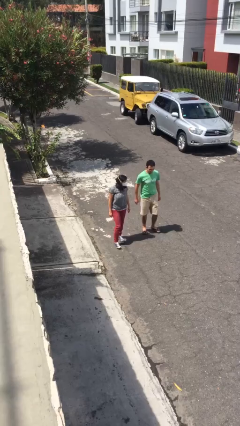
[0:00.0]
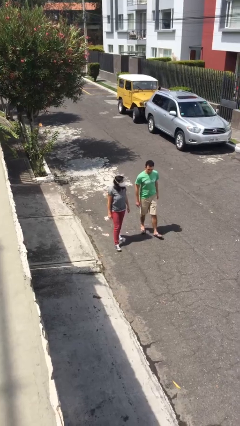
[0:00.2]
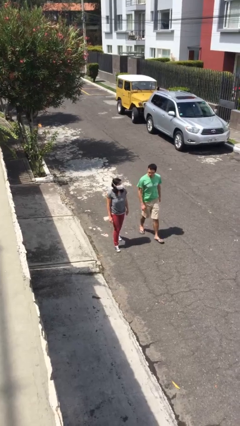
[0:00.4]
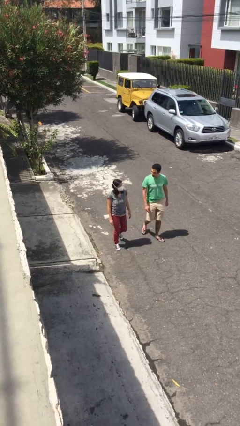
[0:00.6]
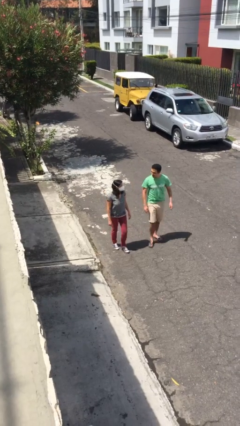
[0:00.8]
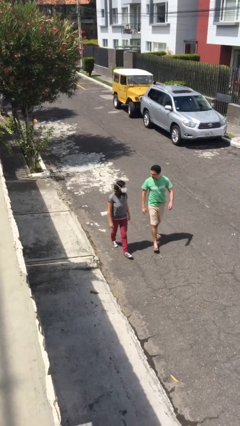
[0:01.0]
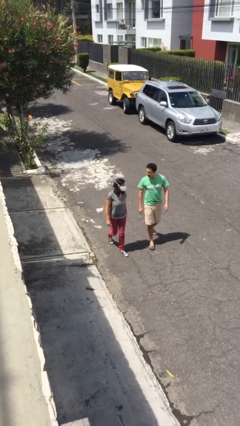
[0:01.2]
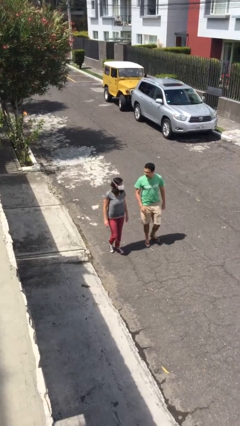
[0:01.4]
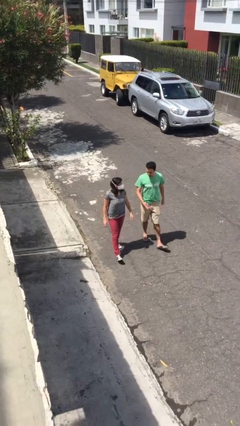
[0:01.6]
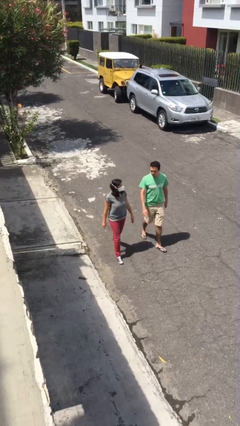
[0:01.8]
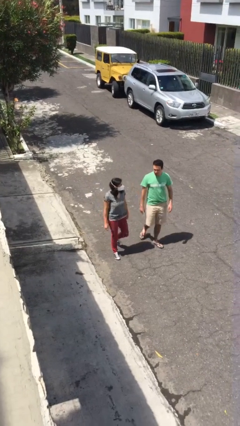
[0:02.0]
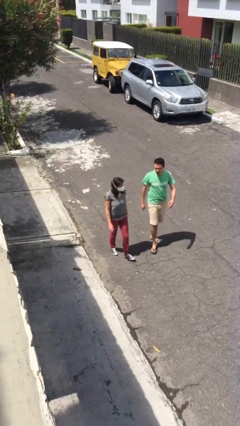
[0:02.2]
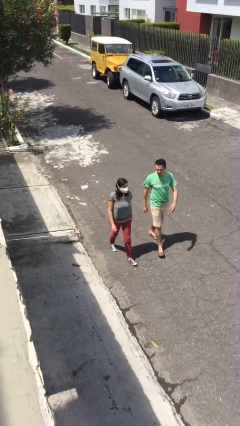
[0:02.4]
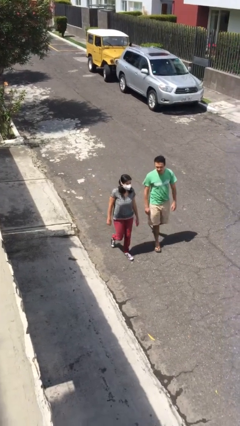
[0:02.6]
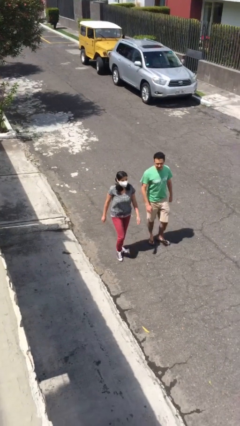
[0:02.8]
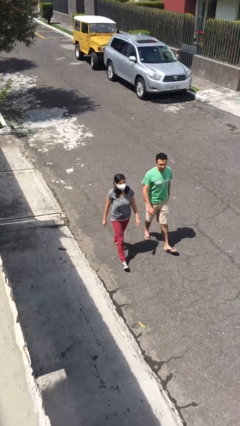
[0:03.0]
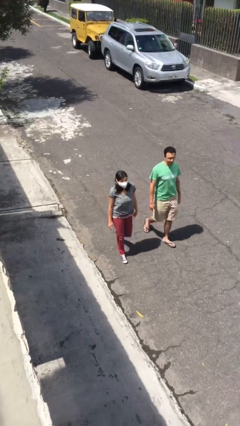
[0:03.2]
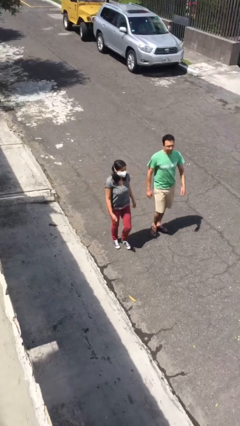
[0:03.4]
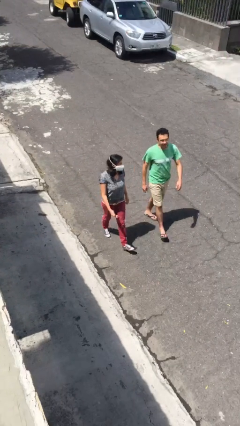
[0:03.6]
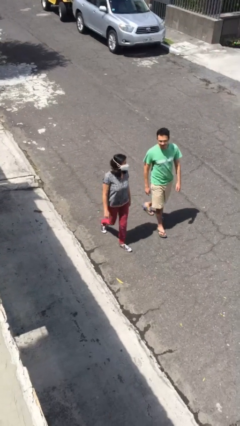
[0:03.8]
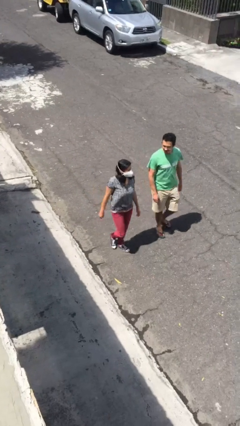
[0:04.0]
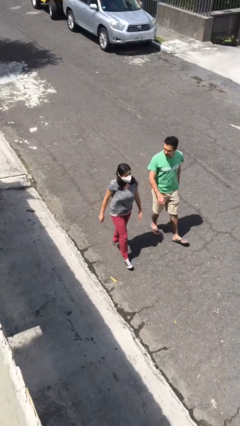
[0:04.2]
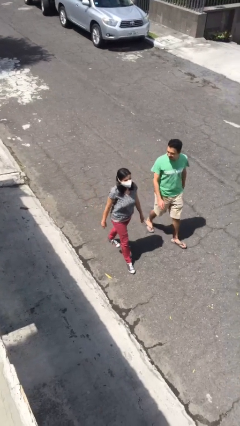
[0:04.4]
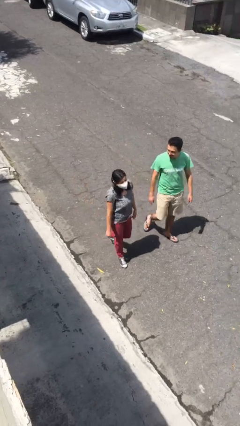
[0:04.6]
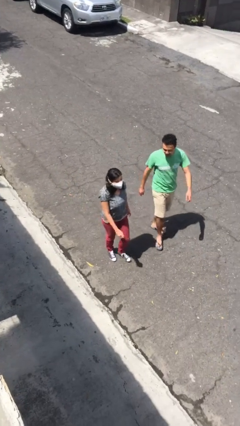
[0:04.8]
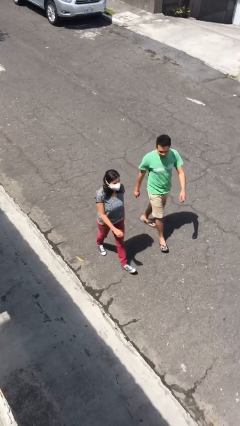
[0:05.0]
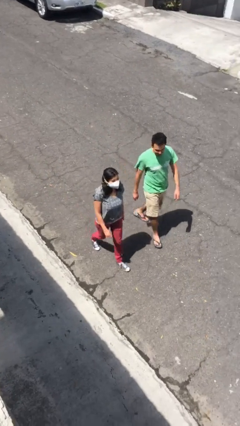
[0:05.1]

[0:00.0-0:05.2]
person talks to person

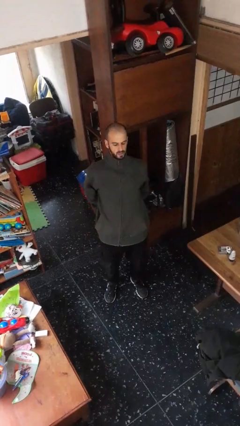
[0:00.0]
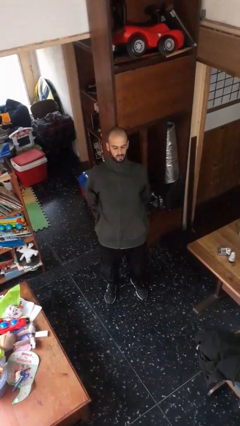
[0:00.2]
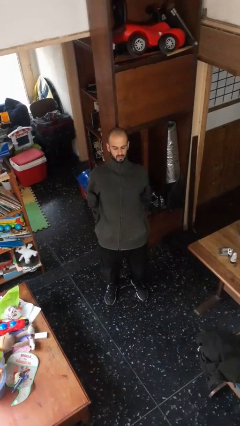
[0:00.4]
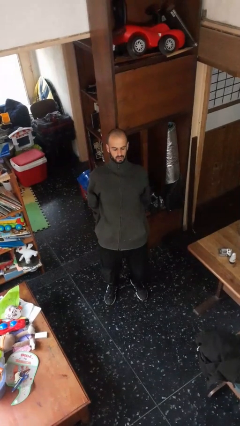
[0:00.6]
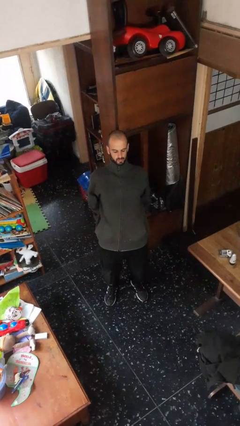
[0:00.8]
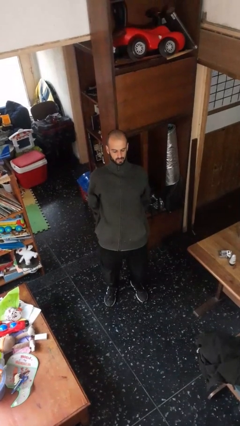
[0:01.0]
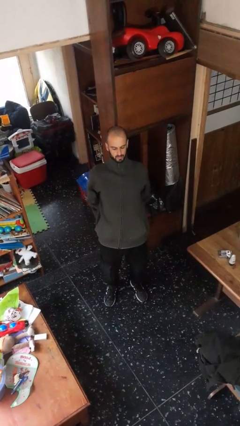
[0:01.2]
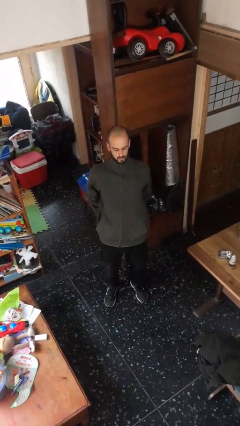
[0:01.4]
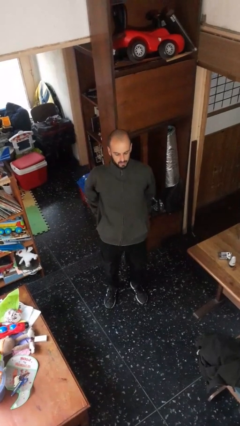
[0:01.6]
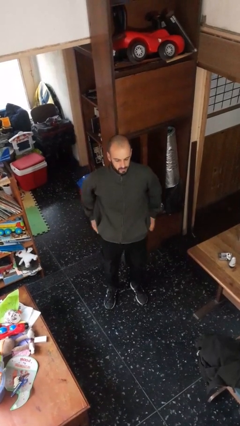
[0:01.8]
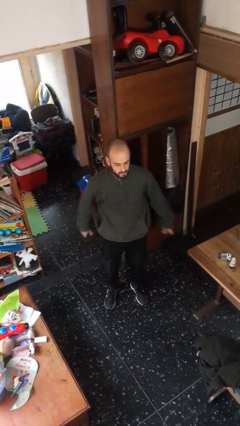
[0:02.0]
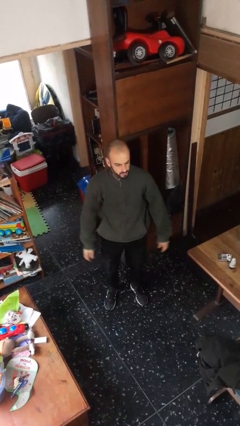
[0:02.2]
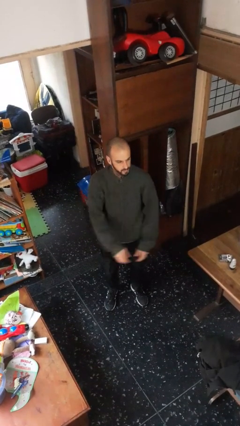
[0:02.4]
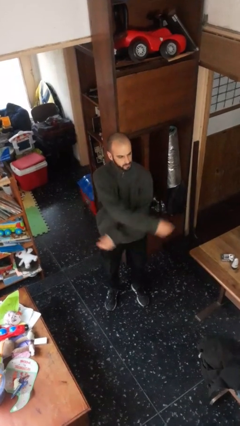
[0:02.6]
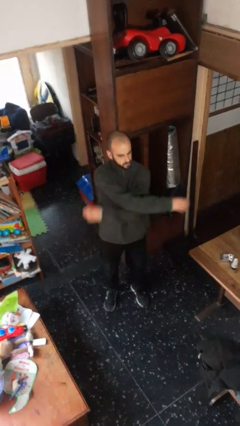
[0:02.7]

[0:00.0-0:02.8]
person stretches back

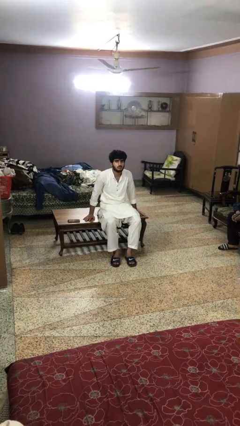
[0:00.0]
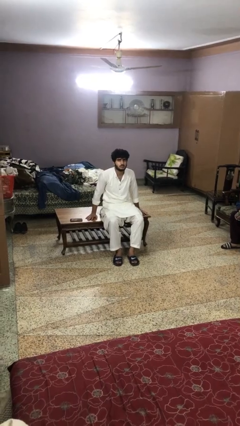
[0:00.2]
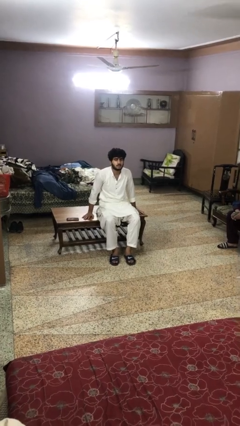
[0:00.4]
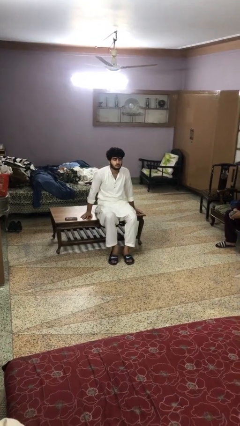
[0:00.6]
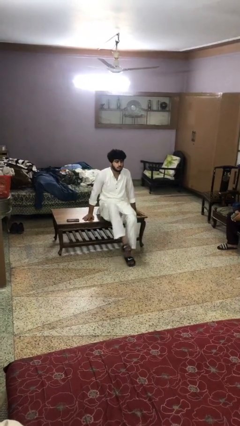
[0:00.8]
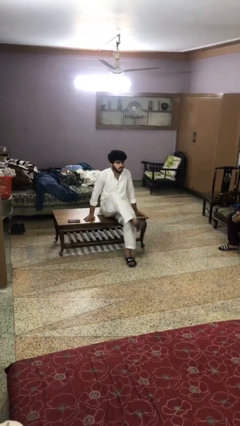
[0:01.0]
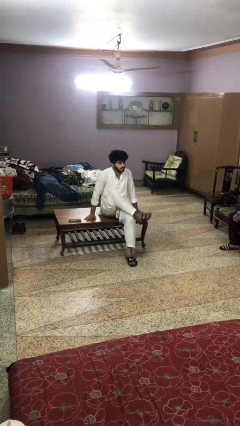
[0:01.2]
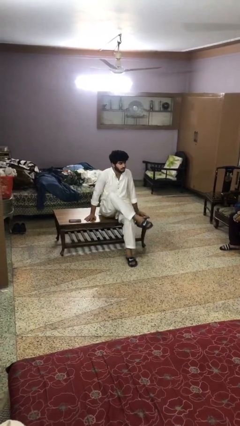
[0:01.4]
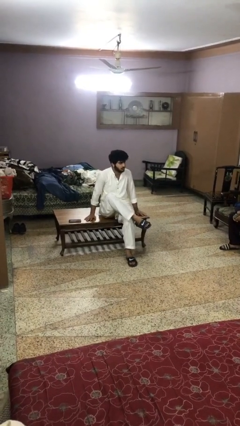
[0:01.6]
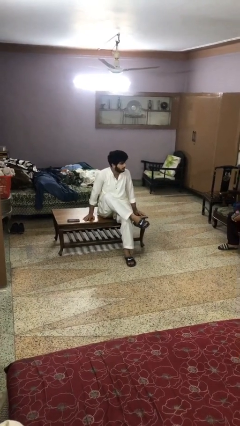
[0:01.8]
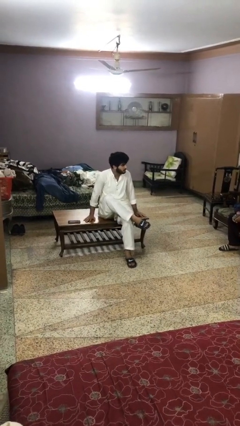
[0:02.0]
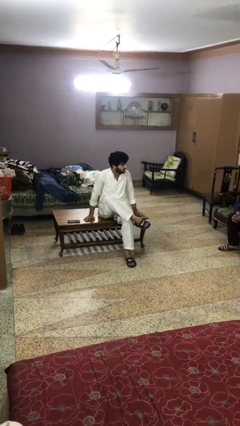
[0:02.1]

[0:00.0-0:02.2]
person crosses legs

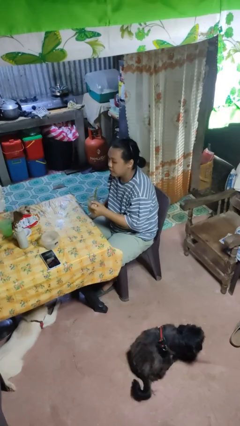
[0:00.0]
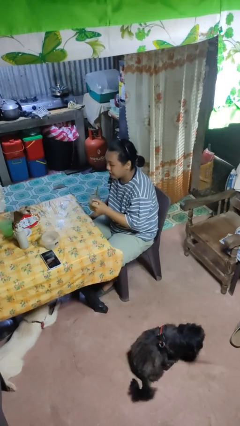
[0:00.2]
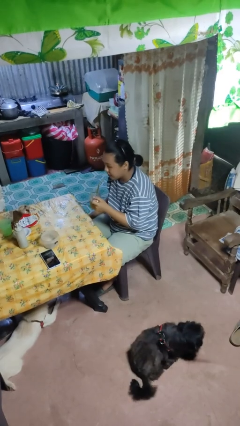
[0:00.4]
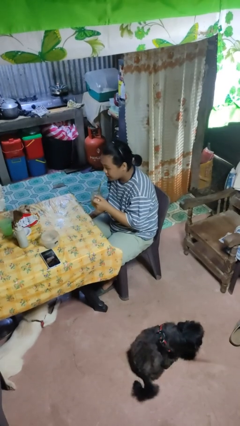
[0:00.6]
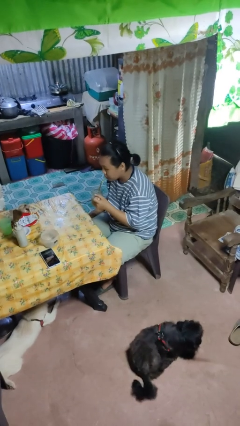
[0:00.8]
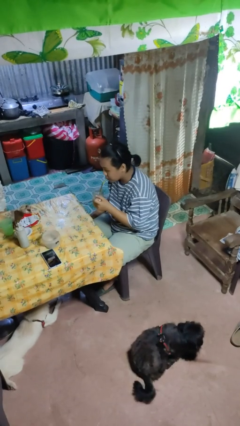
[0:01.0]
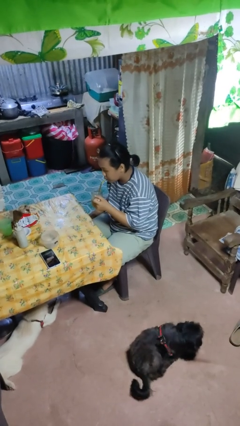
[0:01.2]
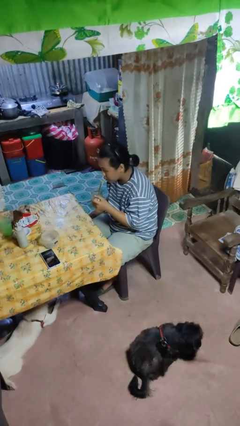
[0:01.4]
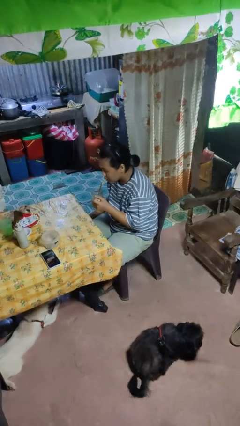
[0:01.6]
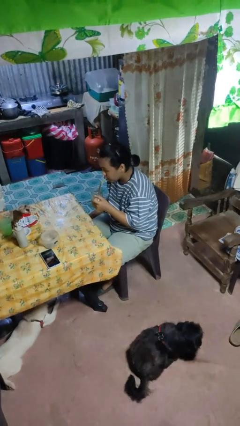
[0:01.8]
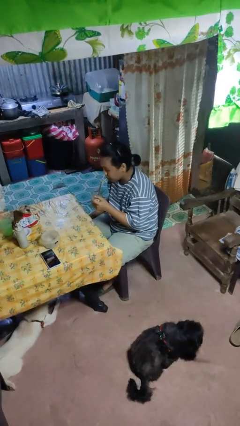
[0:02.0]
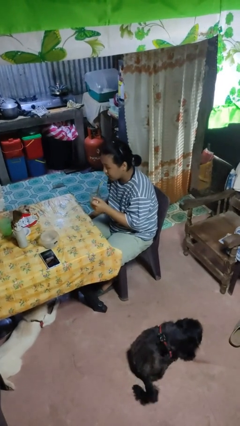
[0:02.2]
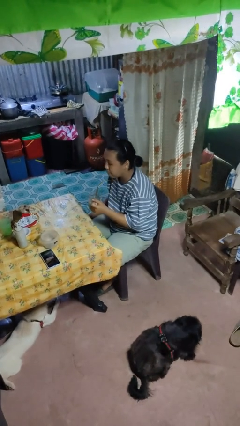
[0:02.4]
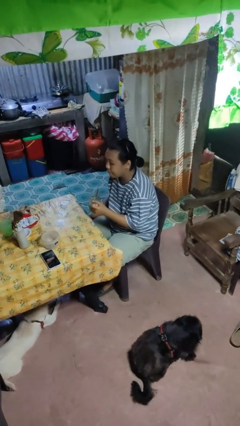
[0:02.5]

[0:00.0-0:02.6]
person drinks from straw

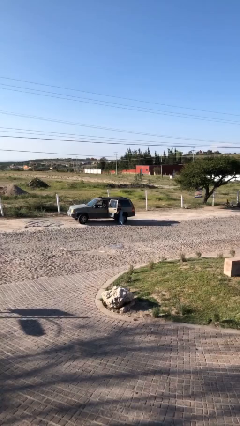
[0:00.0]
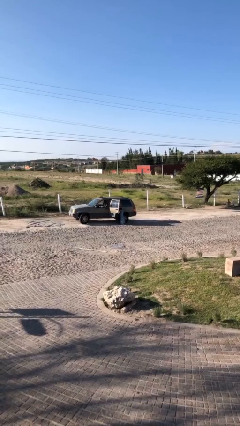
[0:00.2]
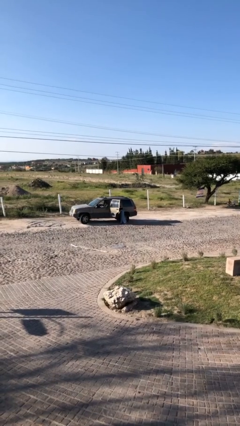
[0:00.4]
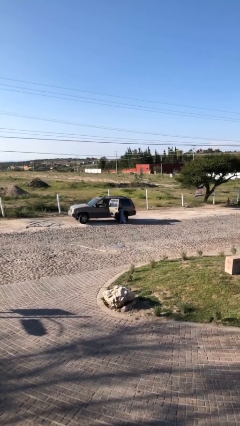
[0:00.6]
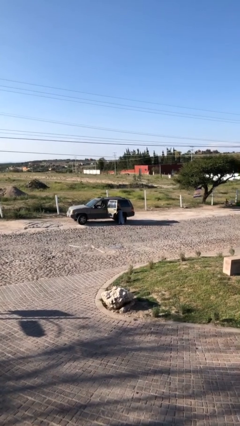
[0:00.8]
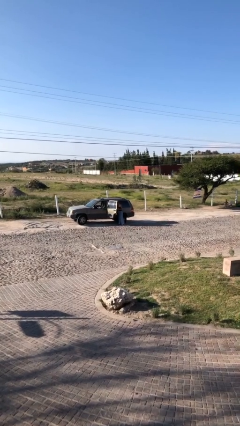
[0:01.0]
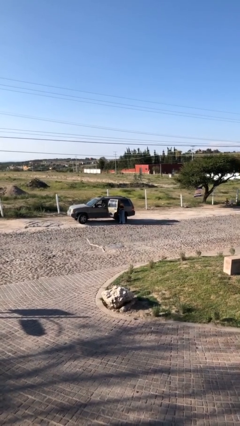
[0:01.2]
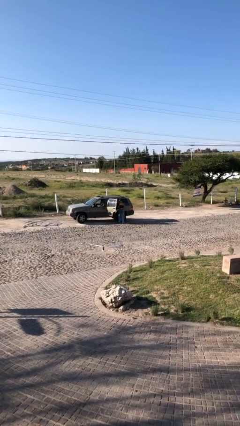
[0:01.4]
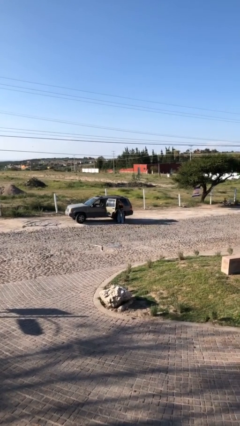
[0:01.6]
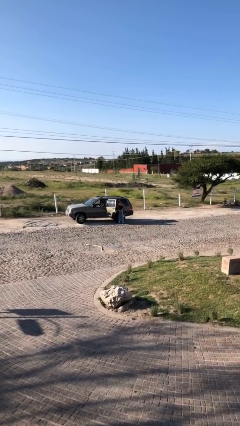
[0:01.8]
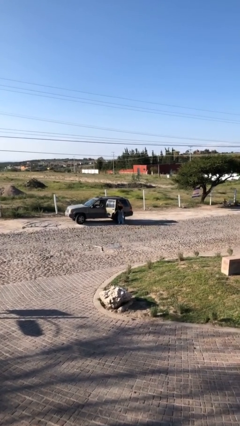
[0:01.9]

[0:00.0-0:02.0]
person unloads car

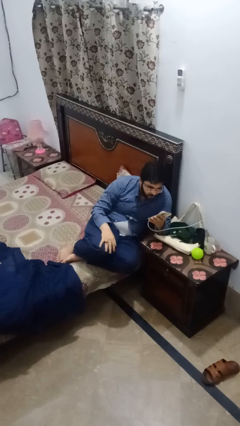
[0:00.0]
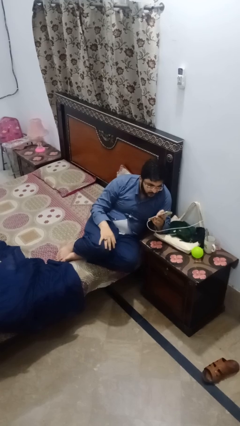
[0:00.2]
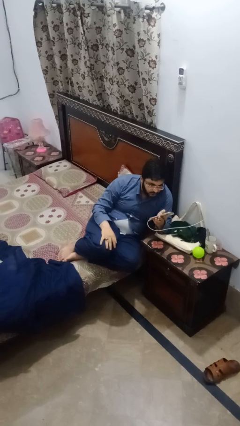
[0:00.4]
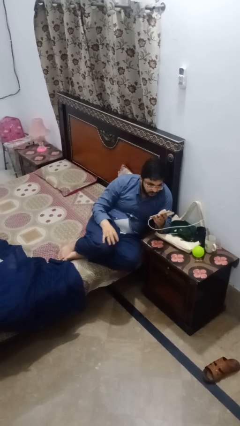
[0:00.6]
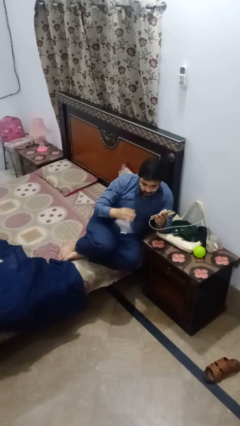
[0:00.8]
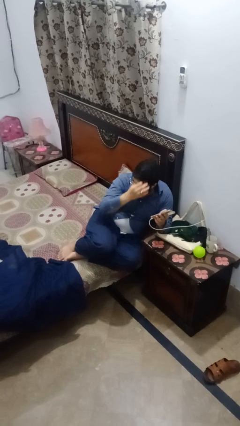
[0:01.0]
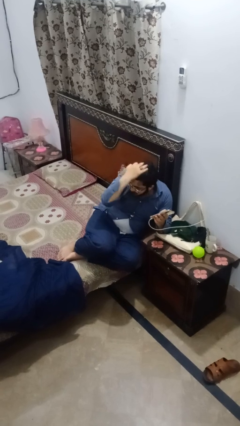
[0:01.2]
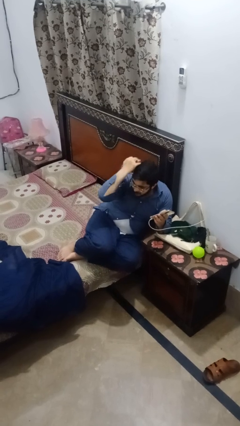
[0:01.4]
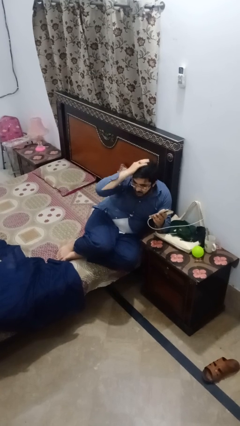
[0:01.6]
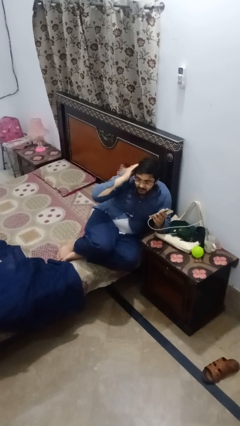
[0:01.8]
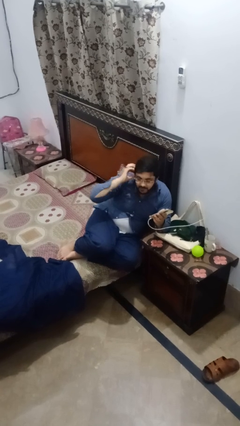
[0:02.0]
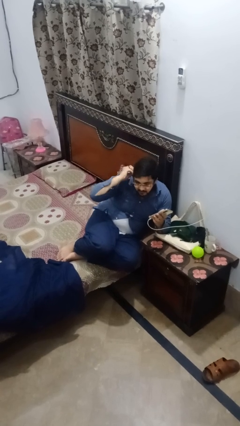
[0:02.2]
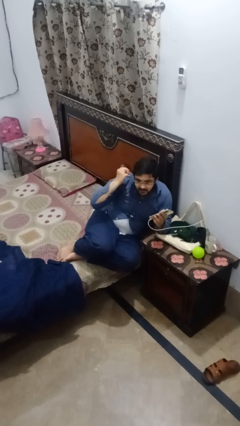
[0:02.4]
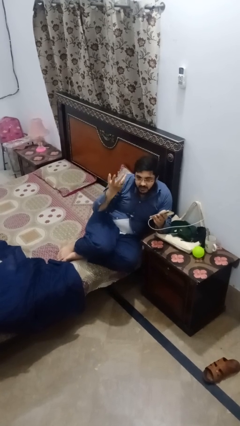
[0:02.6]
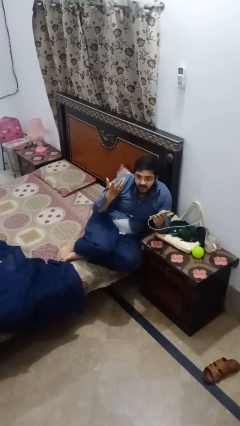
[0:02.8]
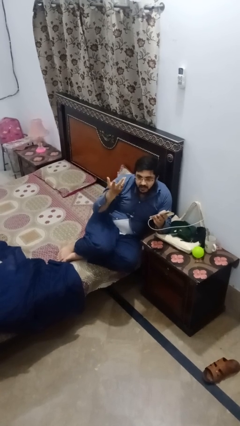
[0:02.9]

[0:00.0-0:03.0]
person strokes hair
